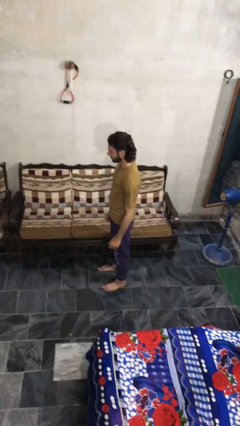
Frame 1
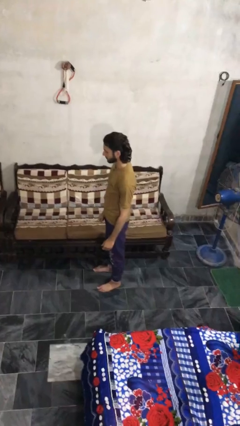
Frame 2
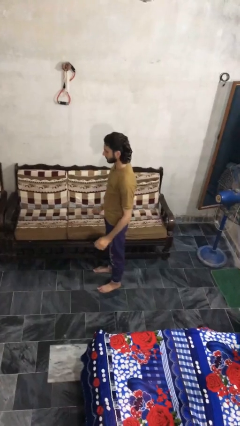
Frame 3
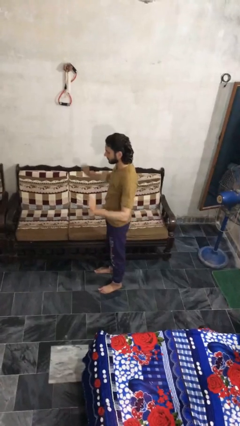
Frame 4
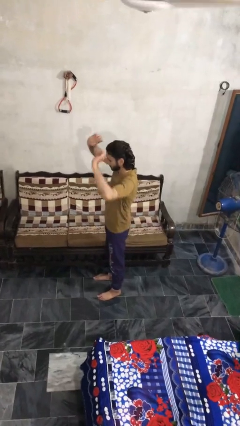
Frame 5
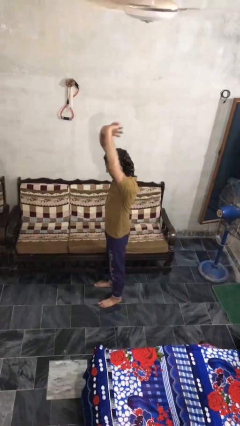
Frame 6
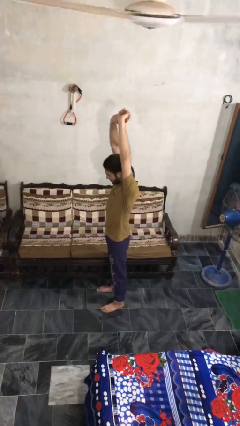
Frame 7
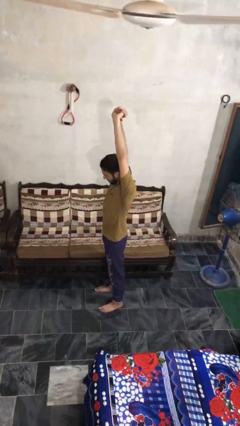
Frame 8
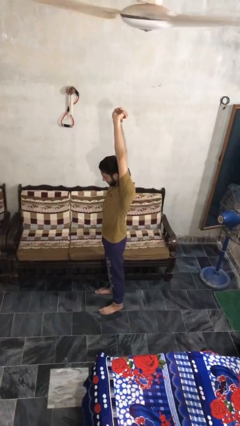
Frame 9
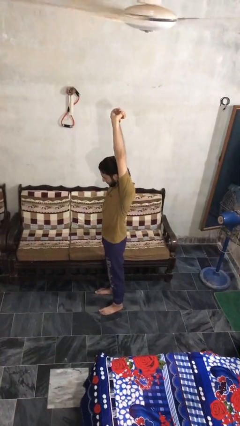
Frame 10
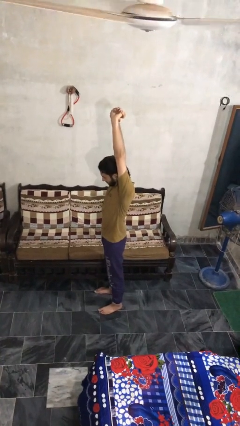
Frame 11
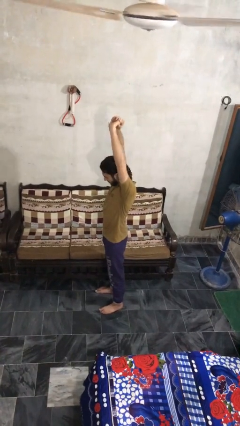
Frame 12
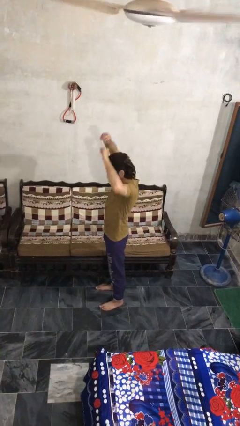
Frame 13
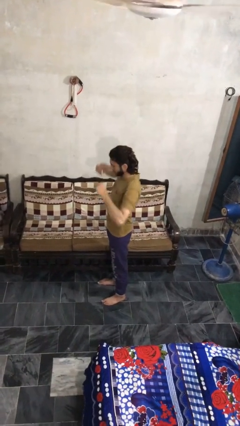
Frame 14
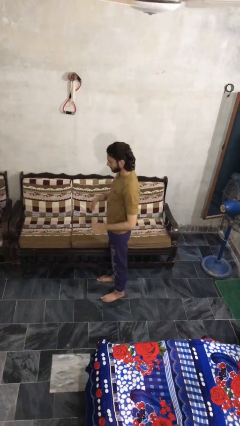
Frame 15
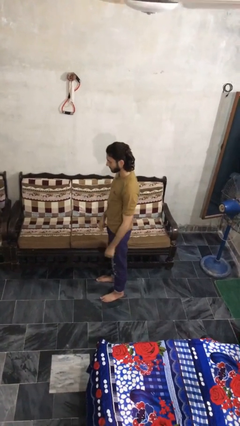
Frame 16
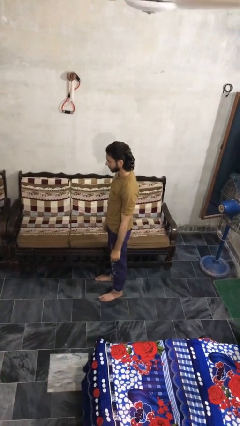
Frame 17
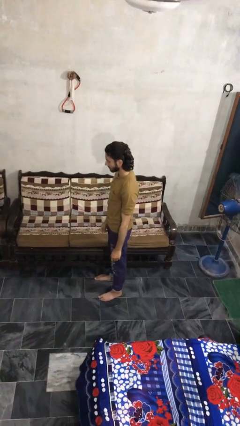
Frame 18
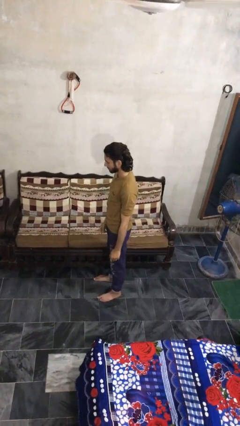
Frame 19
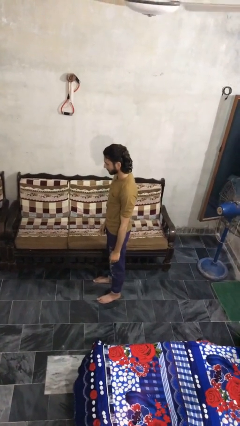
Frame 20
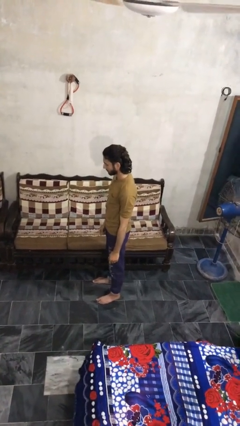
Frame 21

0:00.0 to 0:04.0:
person stretches arms over head

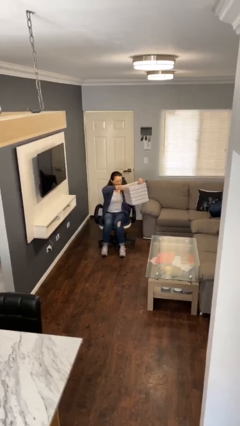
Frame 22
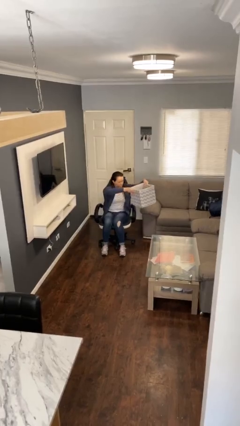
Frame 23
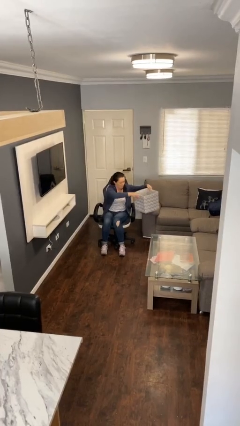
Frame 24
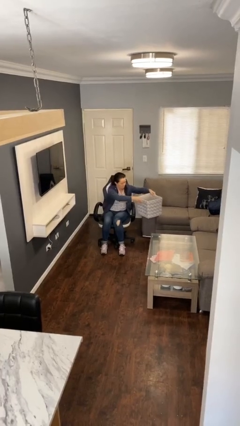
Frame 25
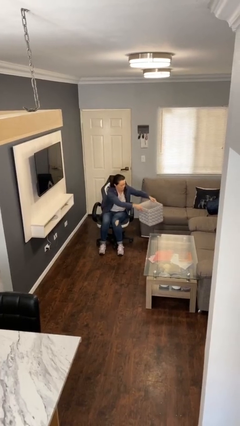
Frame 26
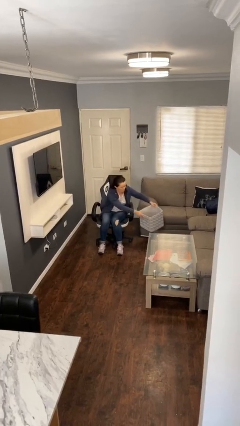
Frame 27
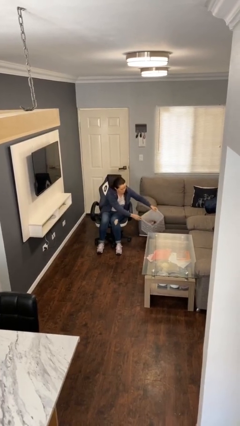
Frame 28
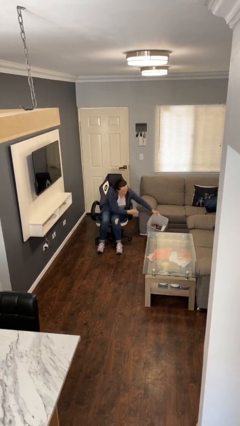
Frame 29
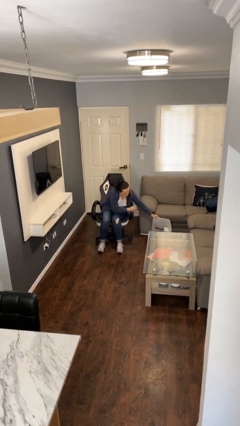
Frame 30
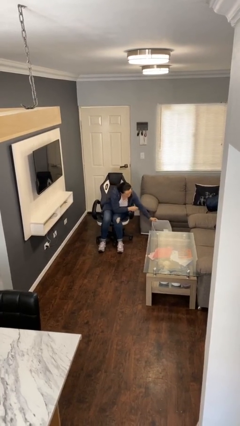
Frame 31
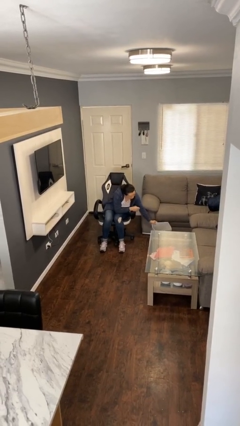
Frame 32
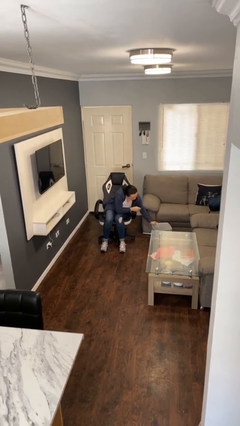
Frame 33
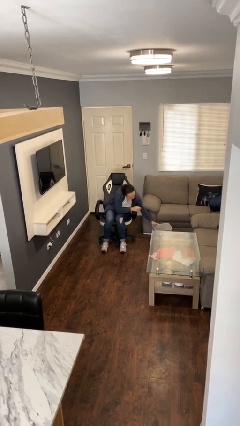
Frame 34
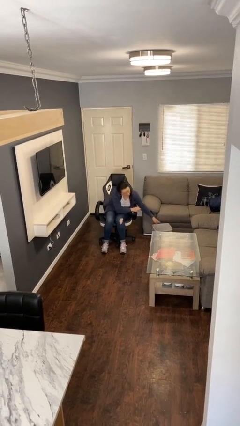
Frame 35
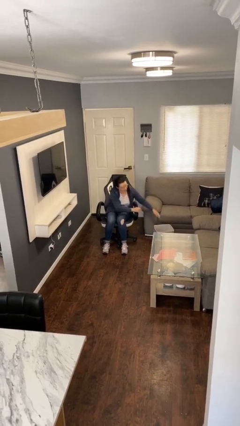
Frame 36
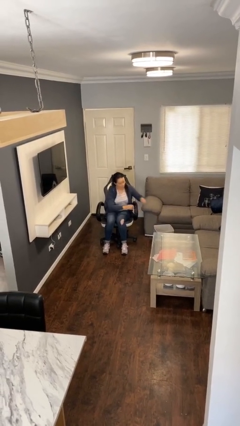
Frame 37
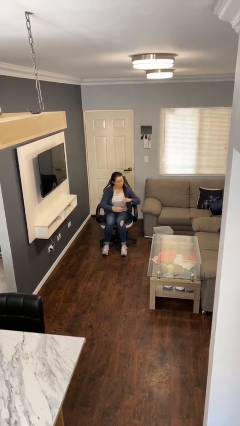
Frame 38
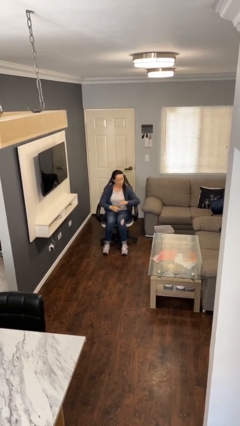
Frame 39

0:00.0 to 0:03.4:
person puts down object on floor

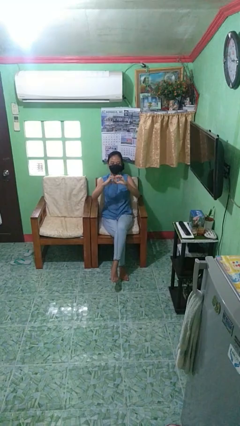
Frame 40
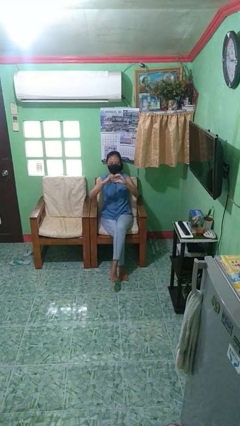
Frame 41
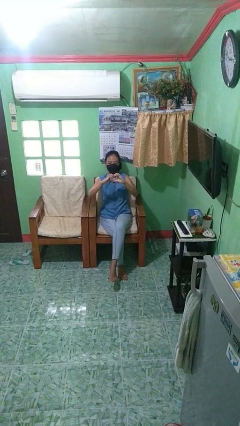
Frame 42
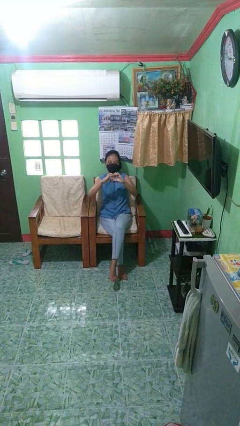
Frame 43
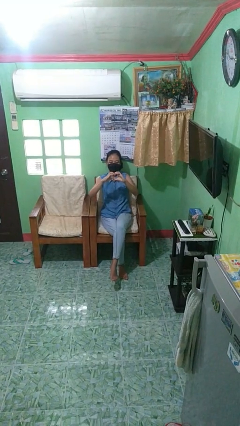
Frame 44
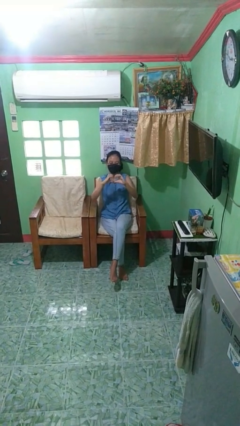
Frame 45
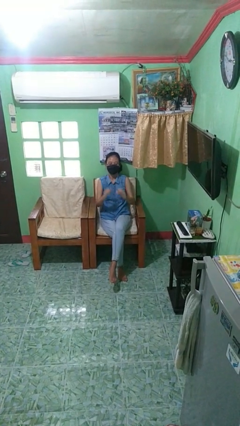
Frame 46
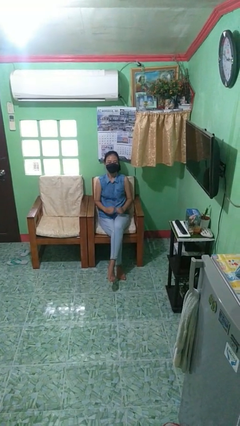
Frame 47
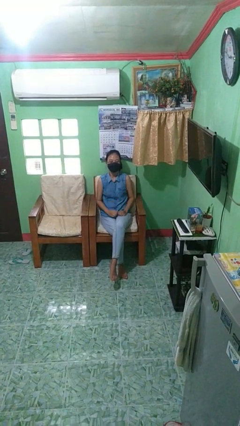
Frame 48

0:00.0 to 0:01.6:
person gestures heart

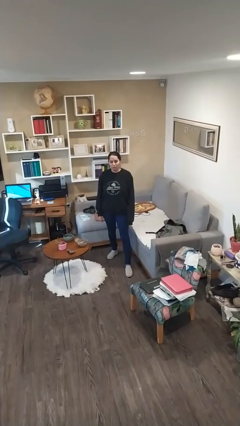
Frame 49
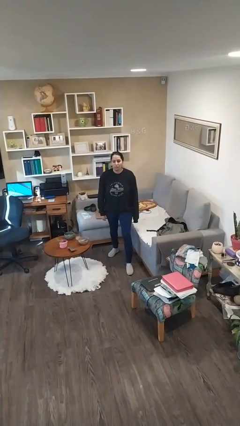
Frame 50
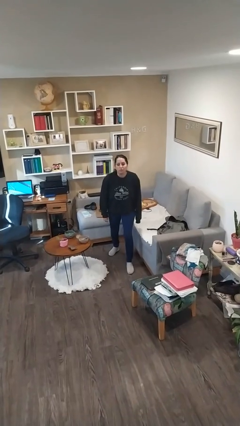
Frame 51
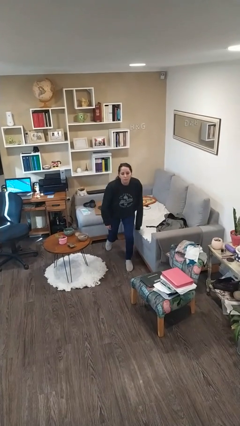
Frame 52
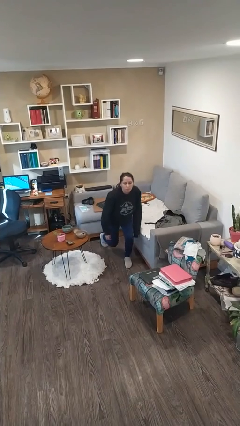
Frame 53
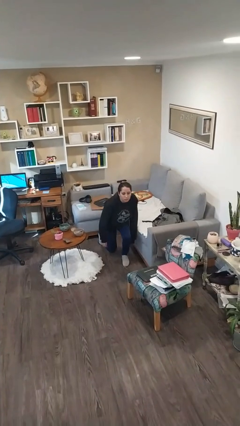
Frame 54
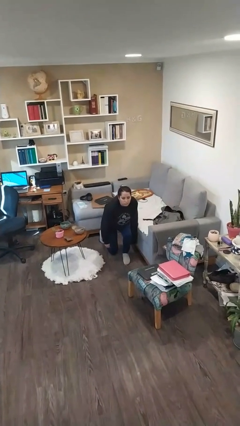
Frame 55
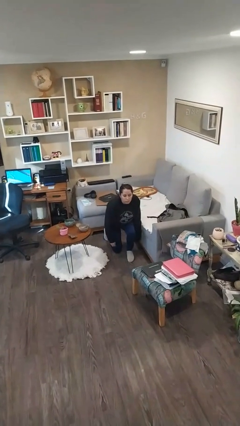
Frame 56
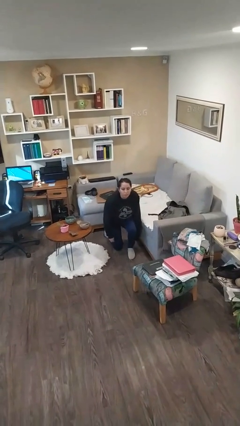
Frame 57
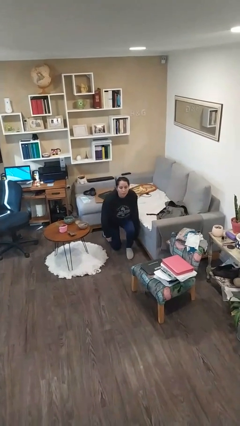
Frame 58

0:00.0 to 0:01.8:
person kneels

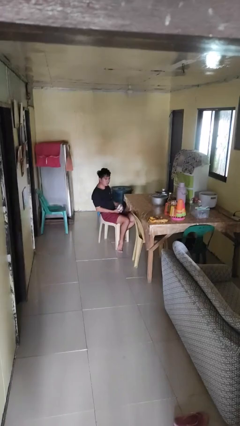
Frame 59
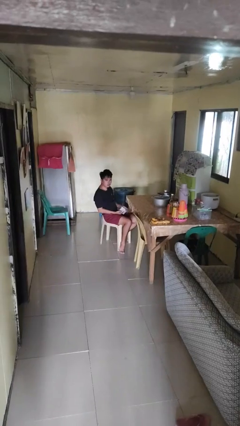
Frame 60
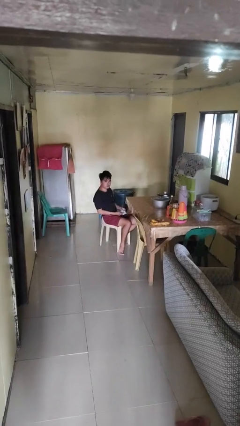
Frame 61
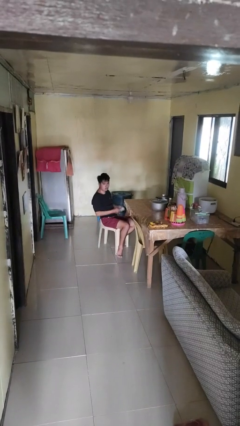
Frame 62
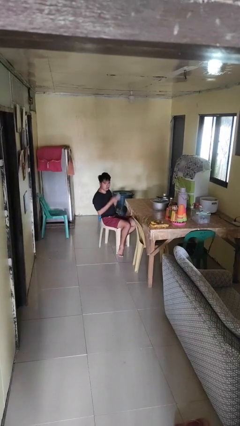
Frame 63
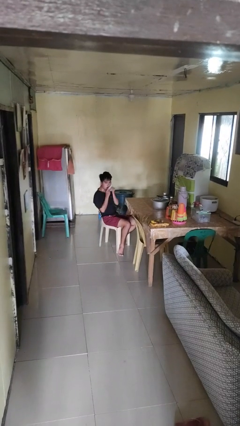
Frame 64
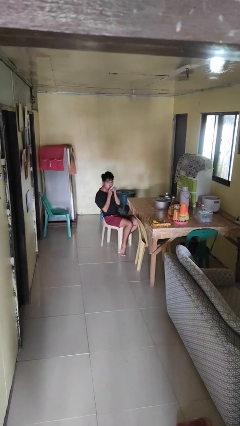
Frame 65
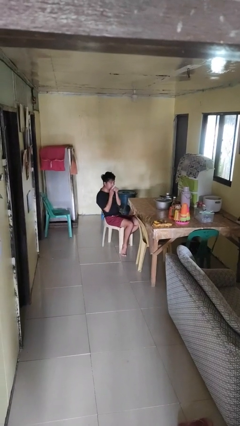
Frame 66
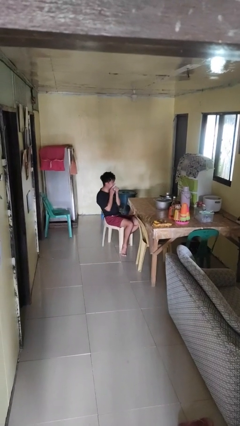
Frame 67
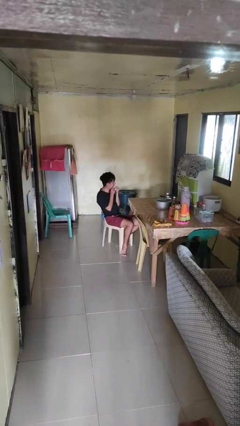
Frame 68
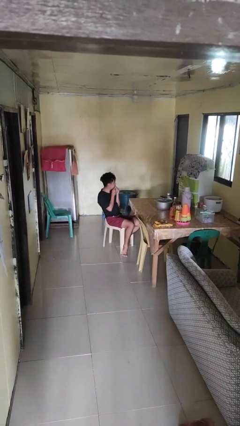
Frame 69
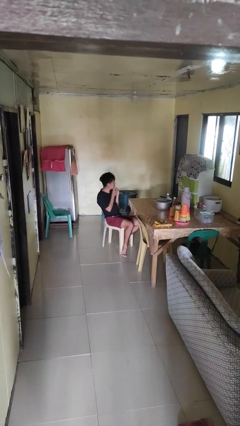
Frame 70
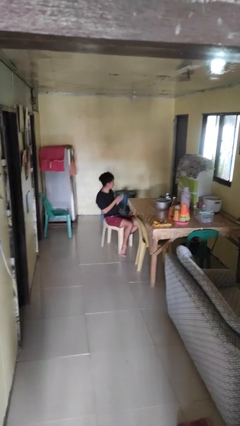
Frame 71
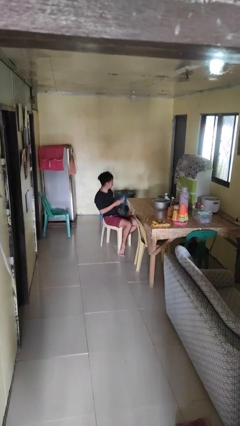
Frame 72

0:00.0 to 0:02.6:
person wipes mouth with napkin

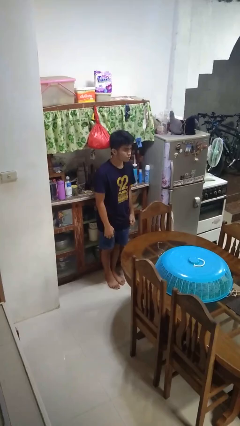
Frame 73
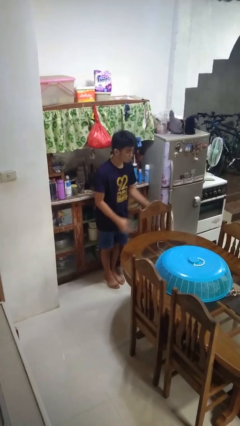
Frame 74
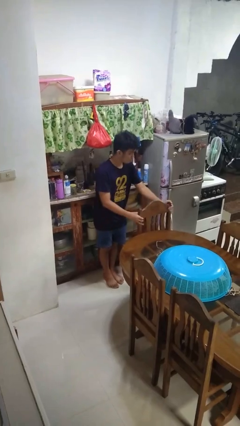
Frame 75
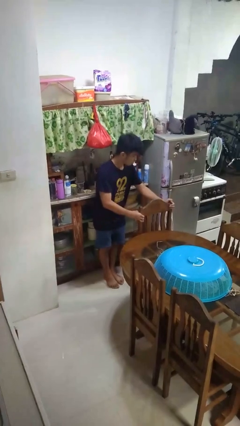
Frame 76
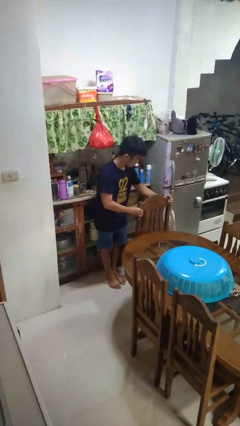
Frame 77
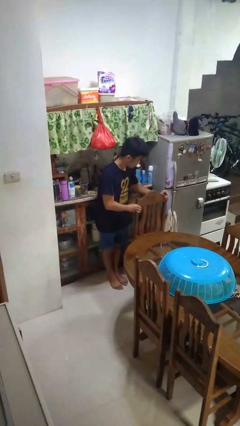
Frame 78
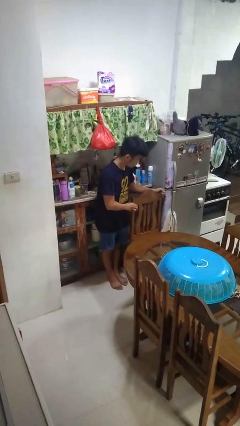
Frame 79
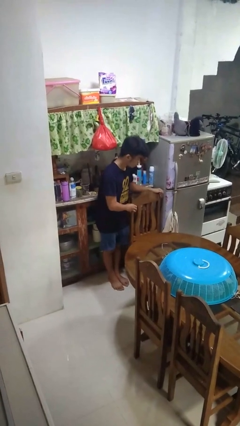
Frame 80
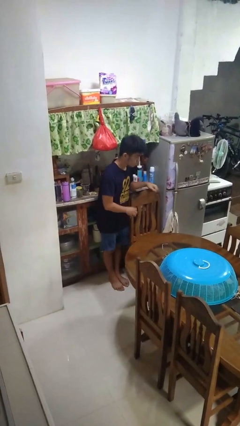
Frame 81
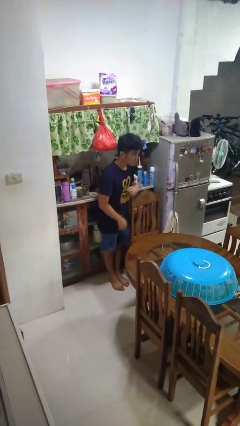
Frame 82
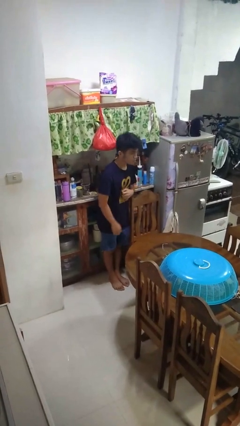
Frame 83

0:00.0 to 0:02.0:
person pulls out chair

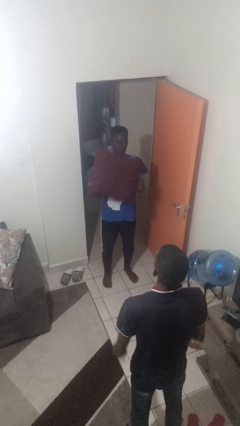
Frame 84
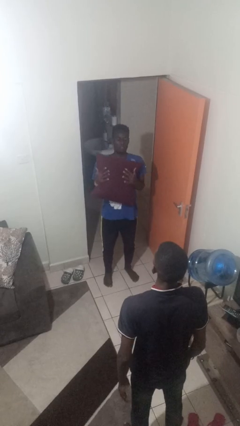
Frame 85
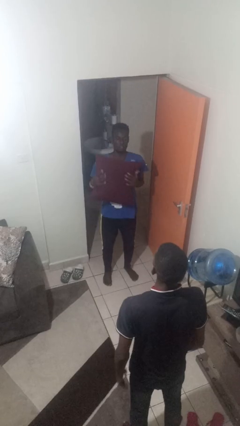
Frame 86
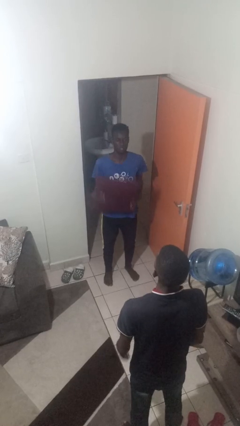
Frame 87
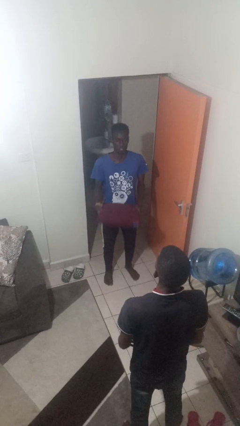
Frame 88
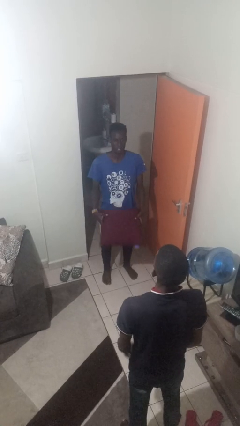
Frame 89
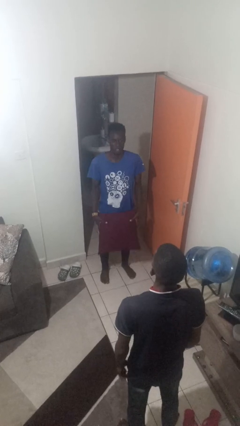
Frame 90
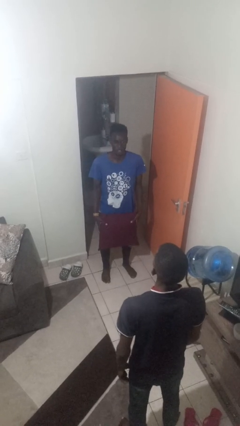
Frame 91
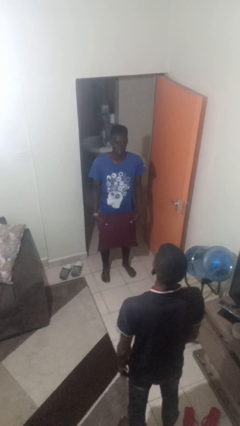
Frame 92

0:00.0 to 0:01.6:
person catches object from person
